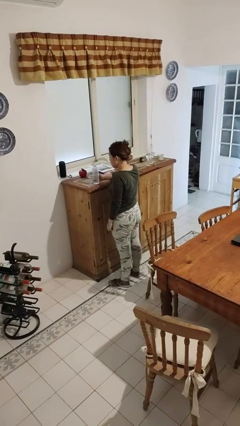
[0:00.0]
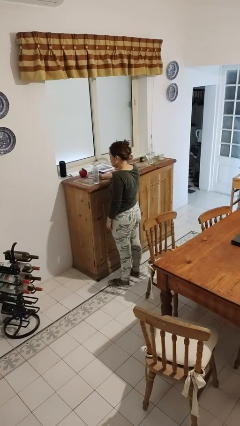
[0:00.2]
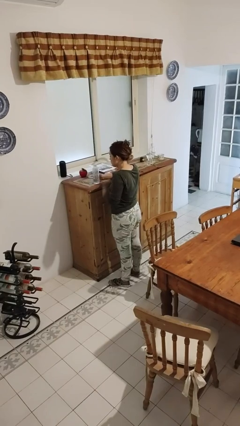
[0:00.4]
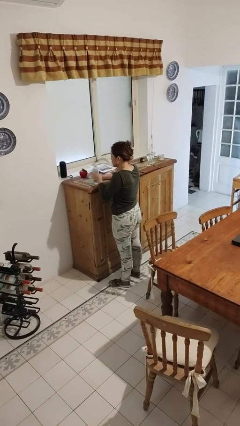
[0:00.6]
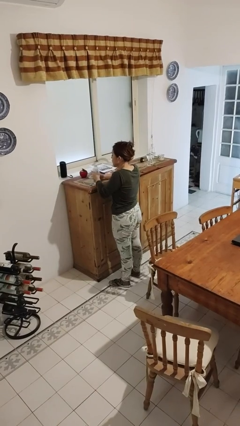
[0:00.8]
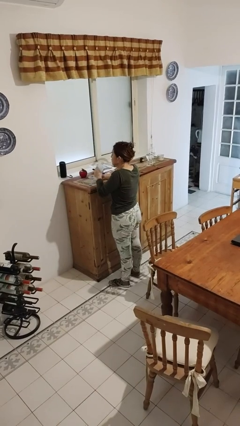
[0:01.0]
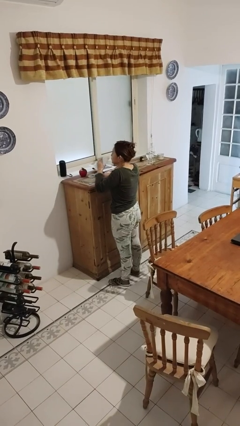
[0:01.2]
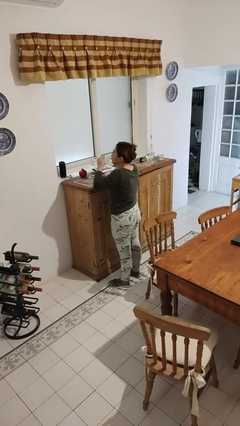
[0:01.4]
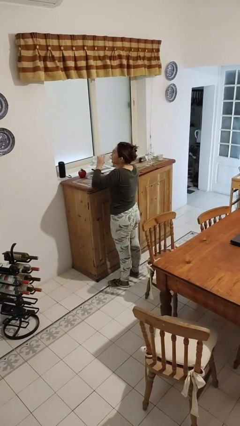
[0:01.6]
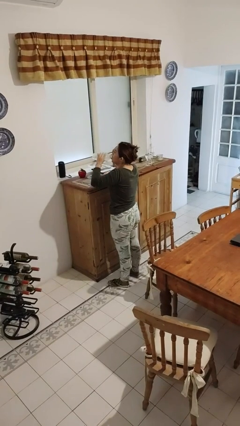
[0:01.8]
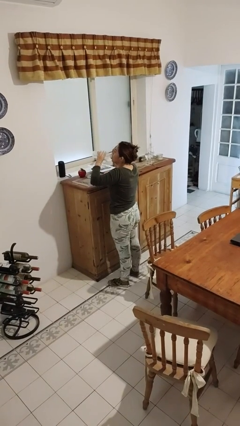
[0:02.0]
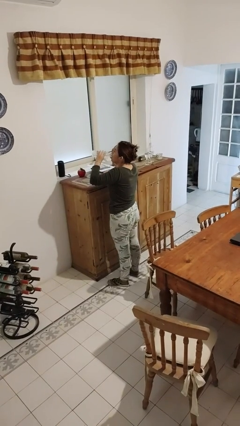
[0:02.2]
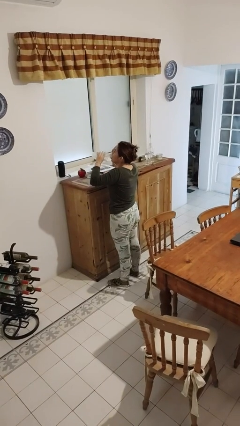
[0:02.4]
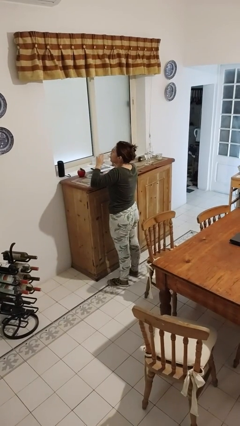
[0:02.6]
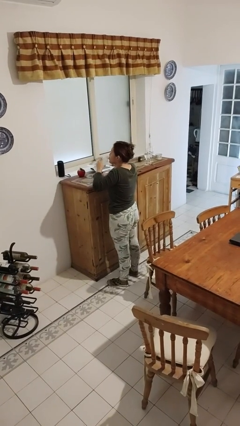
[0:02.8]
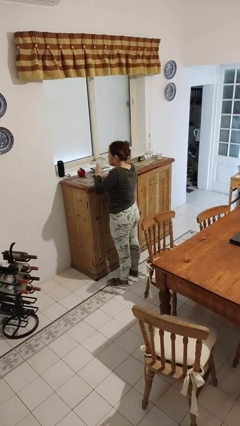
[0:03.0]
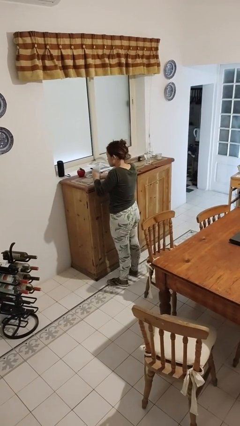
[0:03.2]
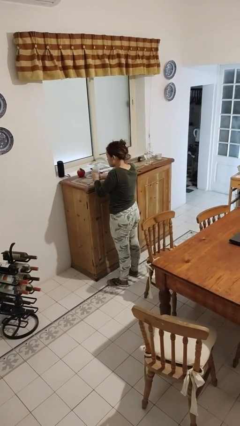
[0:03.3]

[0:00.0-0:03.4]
person drinks from bottle

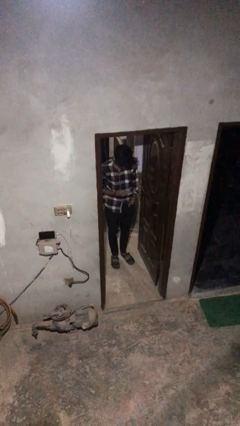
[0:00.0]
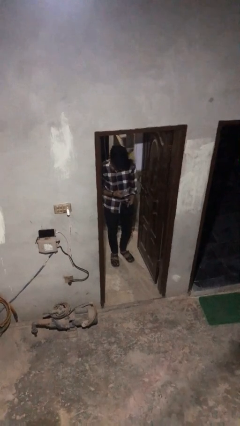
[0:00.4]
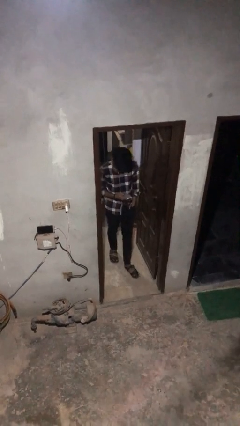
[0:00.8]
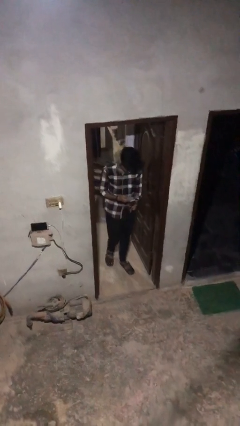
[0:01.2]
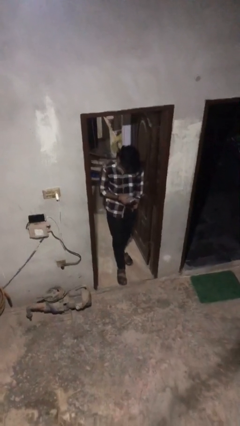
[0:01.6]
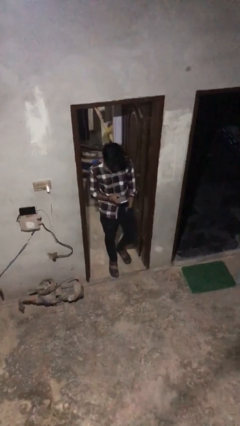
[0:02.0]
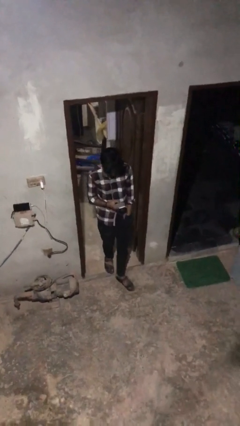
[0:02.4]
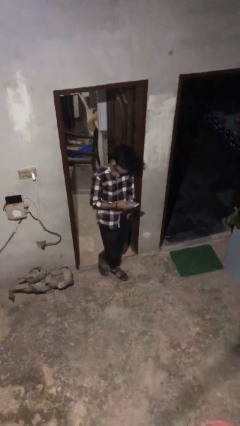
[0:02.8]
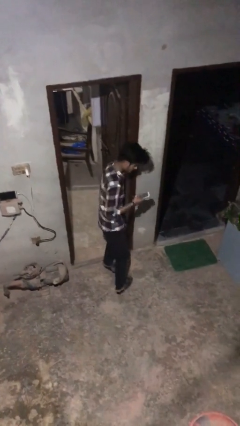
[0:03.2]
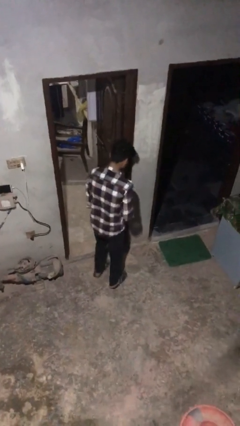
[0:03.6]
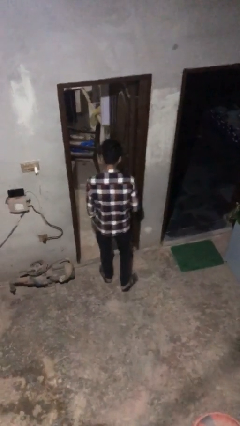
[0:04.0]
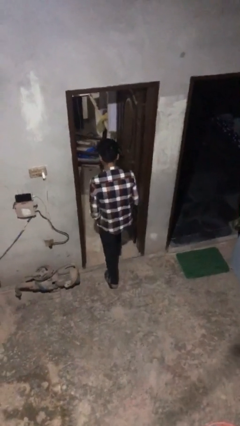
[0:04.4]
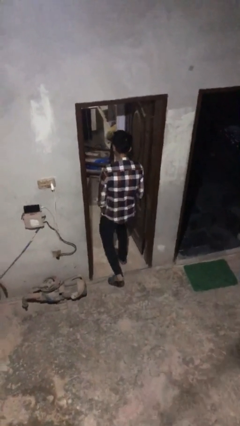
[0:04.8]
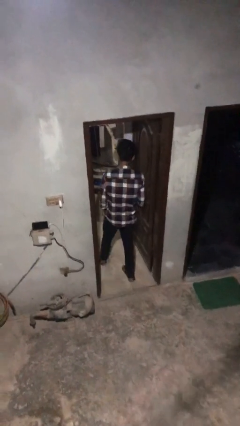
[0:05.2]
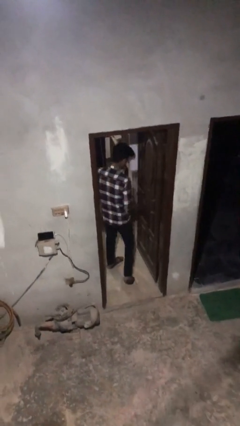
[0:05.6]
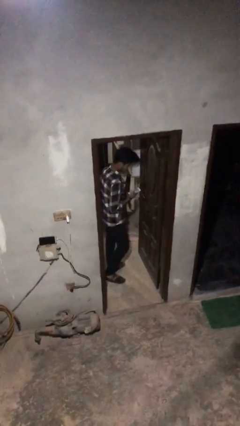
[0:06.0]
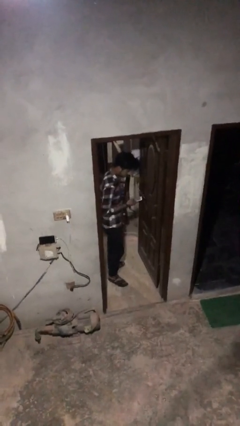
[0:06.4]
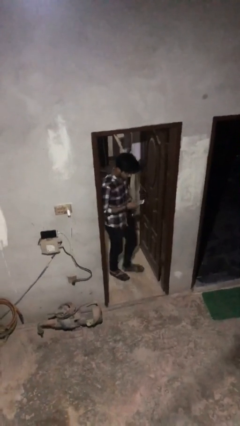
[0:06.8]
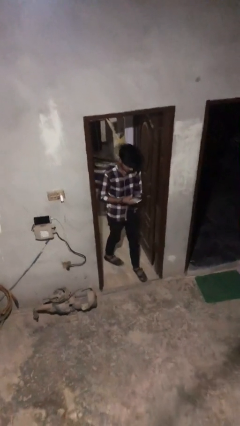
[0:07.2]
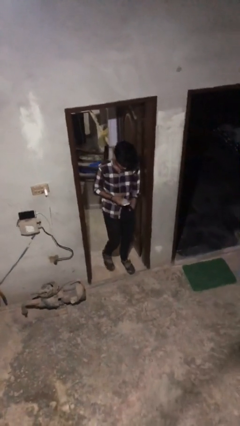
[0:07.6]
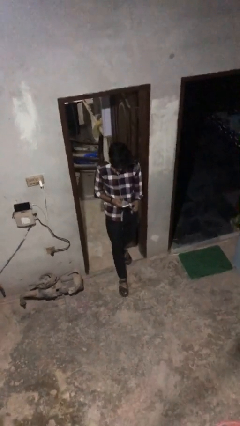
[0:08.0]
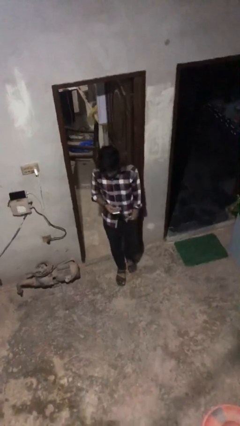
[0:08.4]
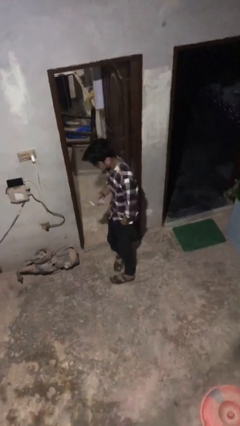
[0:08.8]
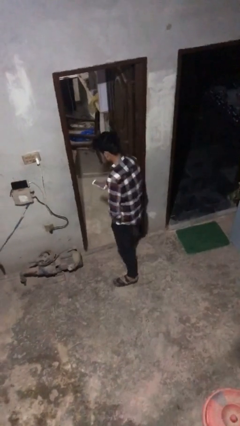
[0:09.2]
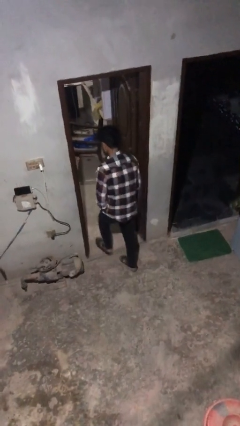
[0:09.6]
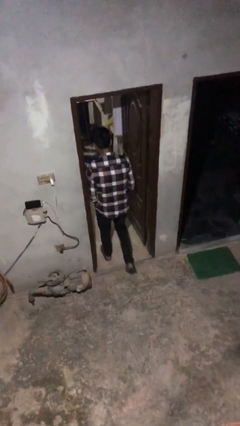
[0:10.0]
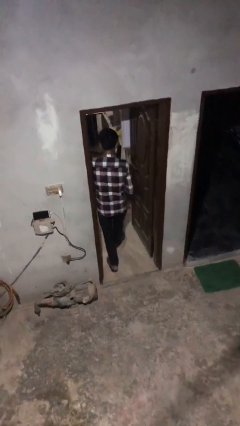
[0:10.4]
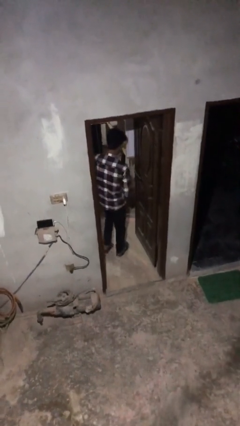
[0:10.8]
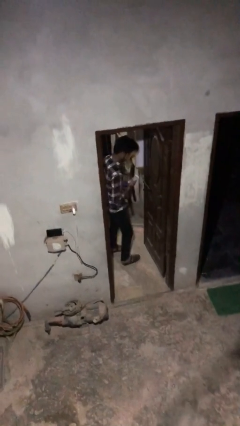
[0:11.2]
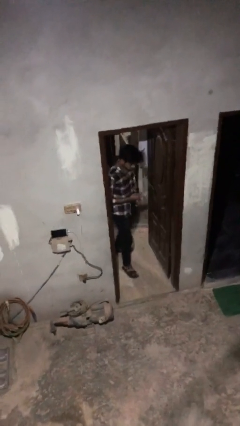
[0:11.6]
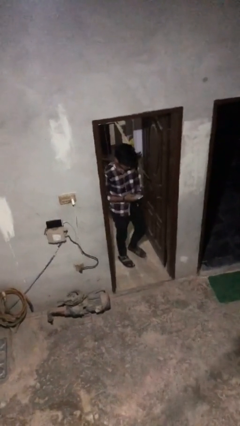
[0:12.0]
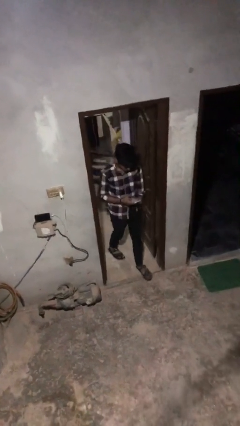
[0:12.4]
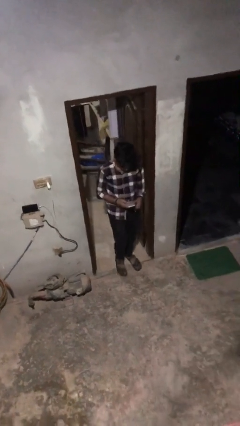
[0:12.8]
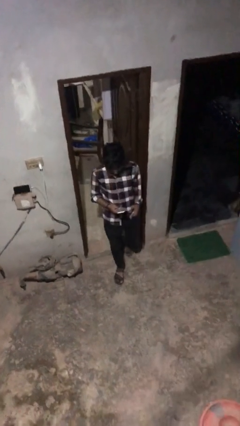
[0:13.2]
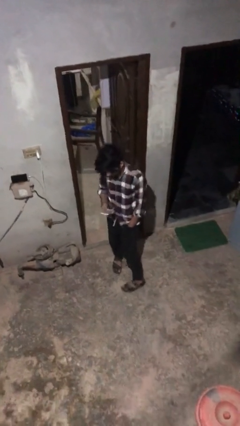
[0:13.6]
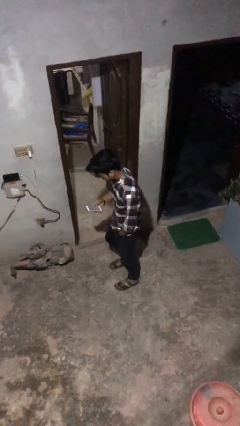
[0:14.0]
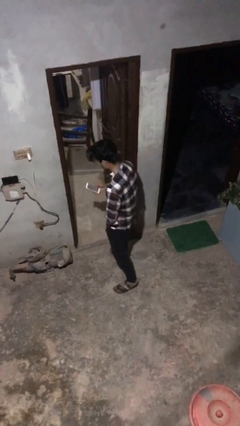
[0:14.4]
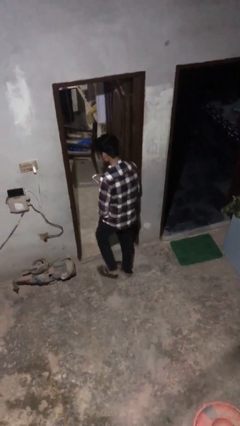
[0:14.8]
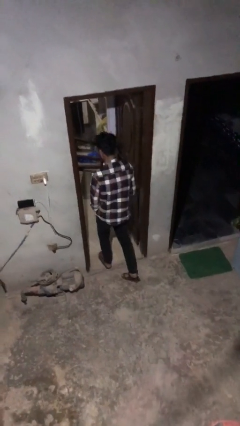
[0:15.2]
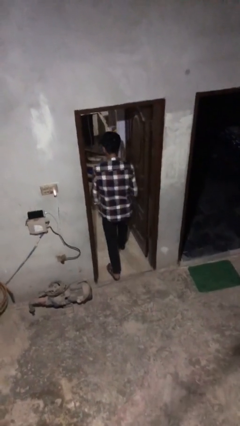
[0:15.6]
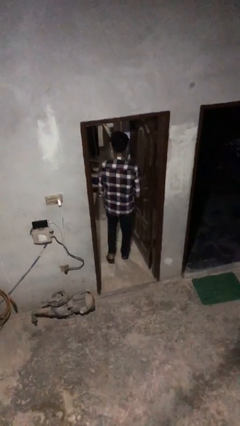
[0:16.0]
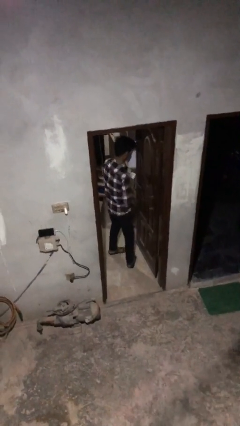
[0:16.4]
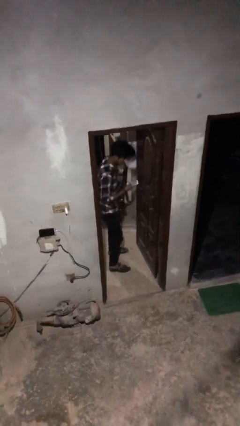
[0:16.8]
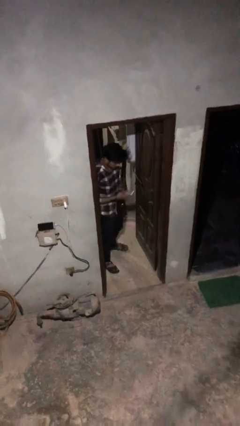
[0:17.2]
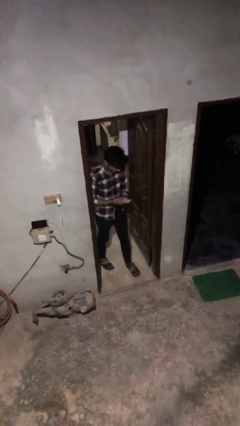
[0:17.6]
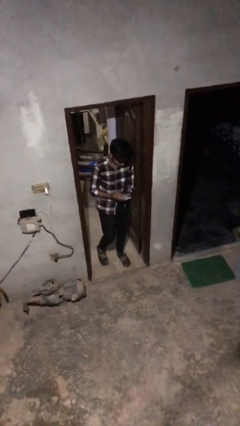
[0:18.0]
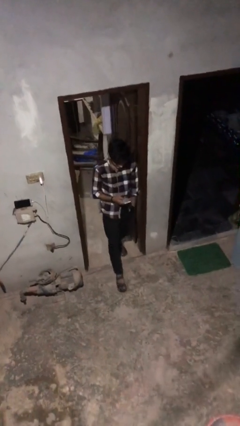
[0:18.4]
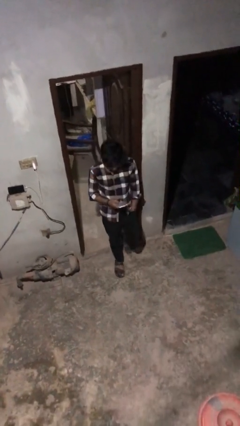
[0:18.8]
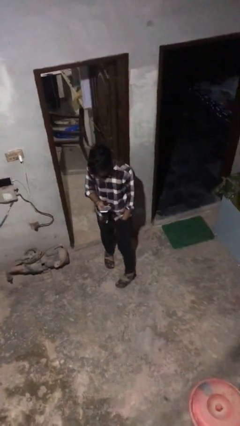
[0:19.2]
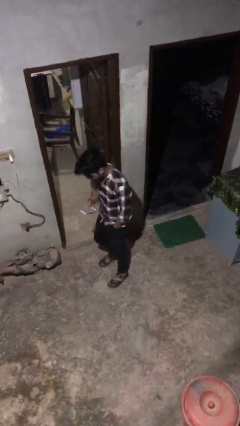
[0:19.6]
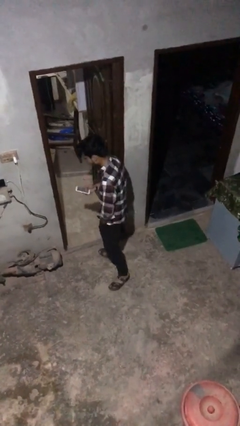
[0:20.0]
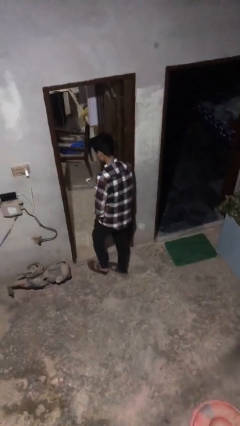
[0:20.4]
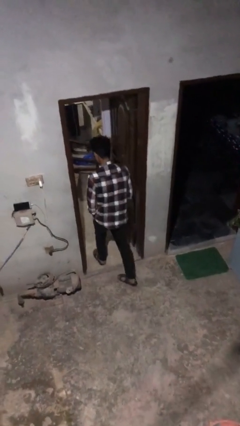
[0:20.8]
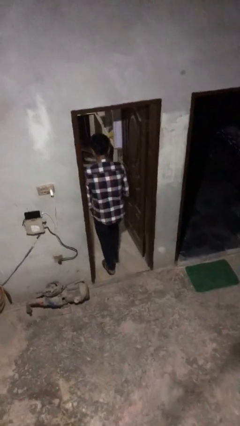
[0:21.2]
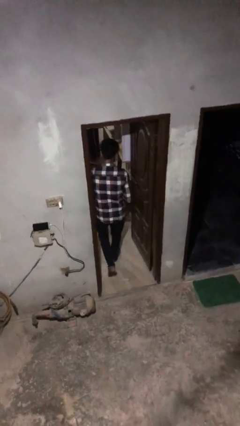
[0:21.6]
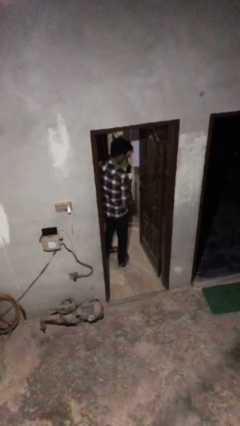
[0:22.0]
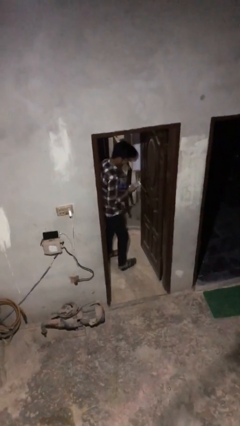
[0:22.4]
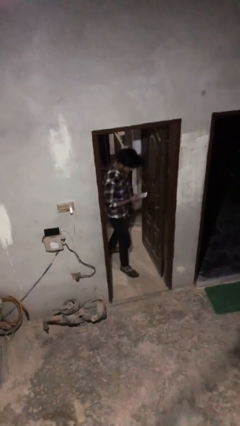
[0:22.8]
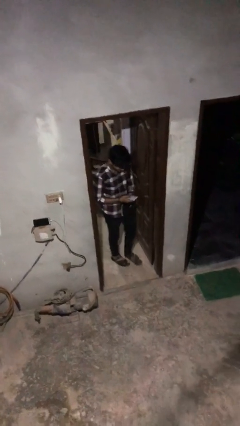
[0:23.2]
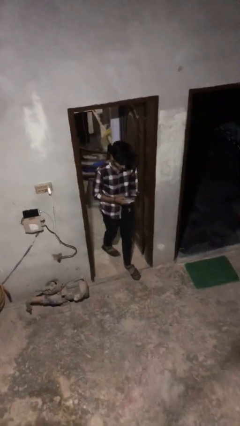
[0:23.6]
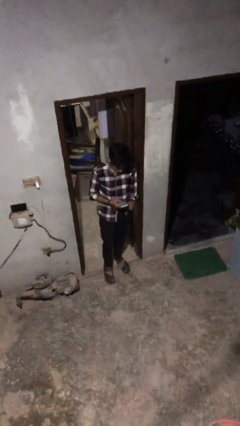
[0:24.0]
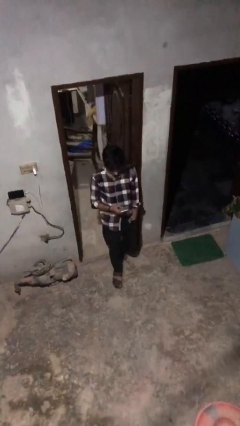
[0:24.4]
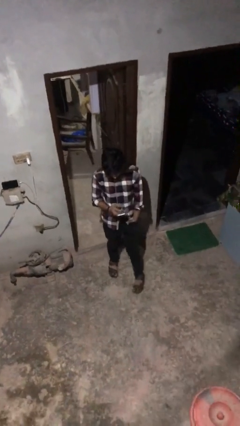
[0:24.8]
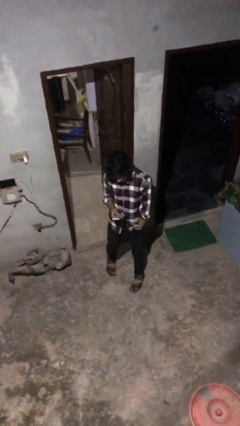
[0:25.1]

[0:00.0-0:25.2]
person texts on phone

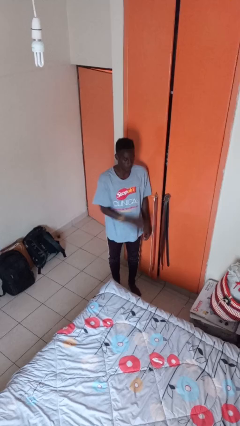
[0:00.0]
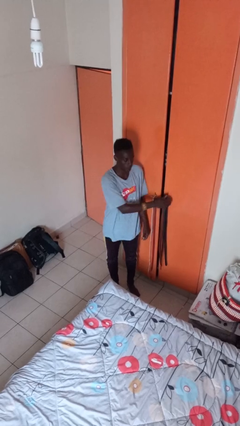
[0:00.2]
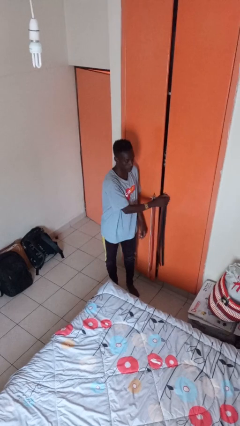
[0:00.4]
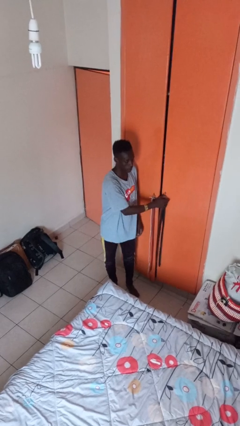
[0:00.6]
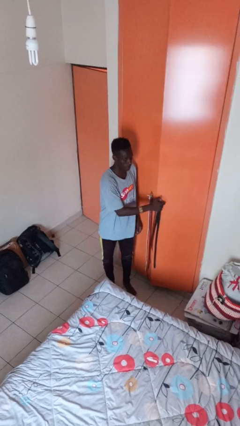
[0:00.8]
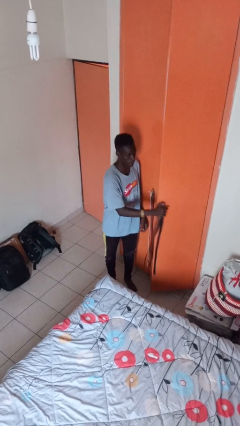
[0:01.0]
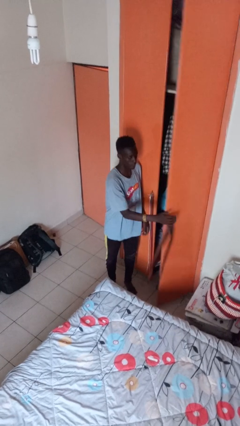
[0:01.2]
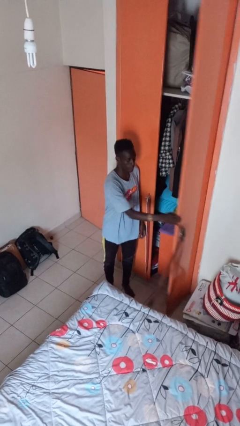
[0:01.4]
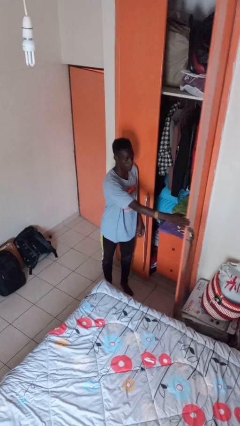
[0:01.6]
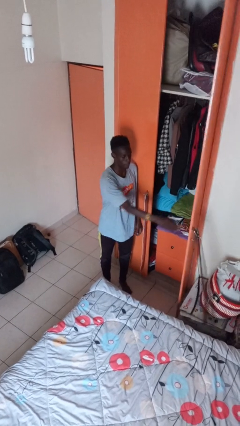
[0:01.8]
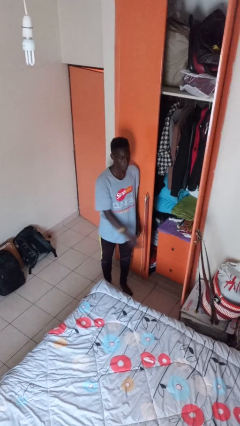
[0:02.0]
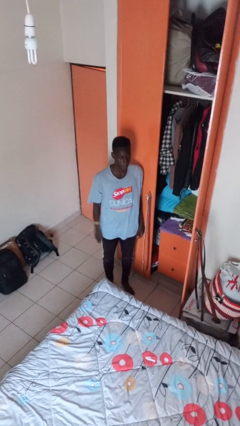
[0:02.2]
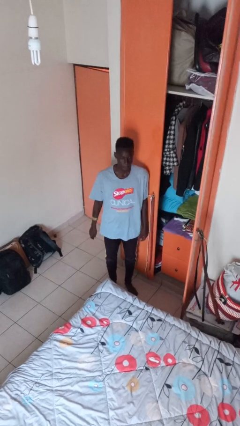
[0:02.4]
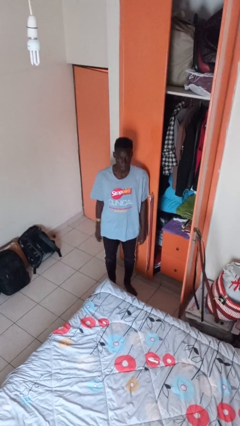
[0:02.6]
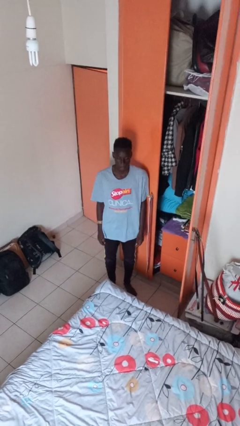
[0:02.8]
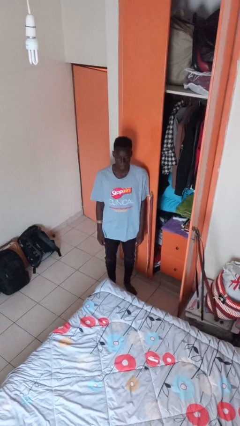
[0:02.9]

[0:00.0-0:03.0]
person opens closet door
